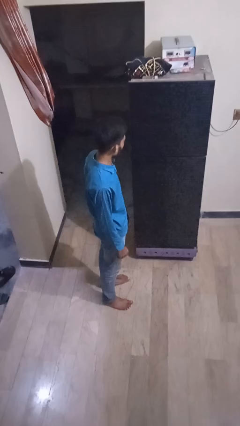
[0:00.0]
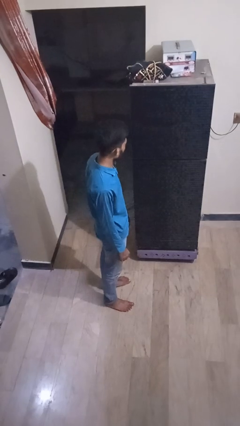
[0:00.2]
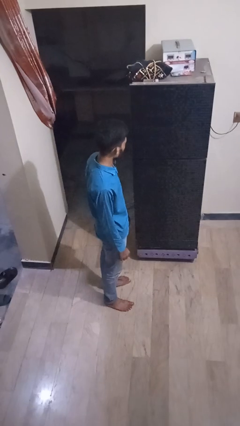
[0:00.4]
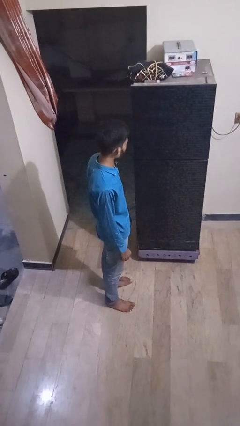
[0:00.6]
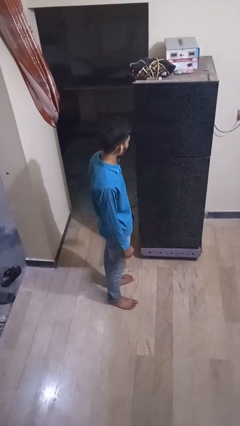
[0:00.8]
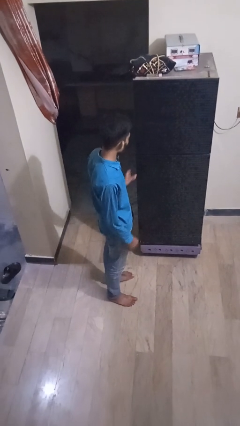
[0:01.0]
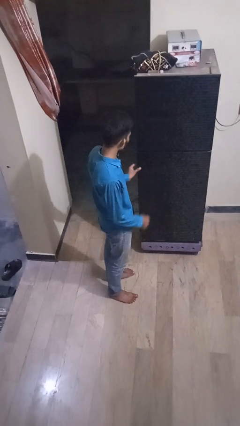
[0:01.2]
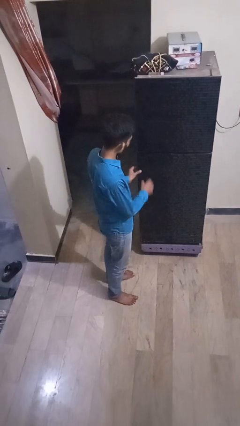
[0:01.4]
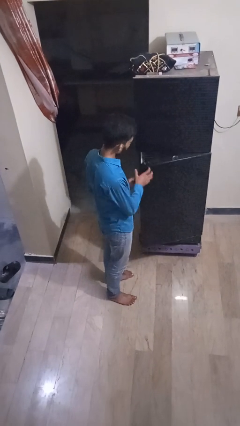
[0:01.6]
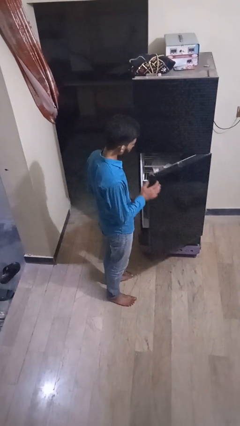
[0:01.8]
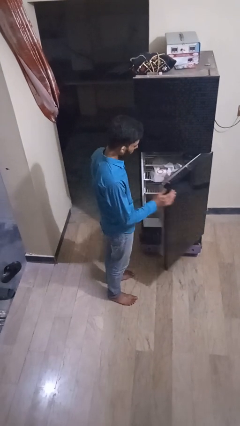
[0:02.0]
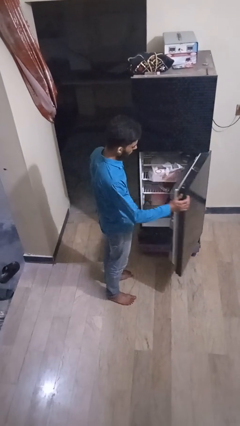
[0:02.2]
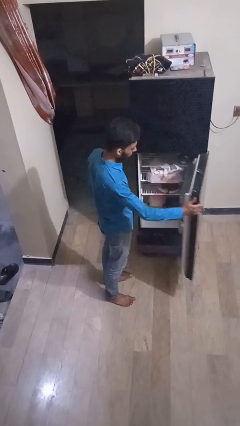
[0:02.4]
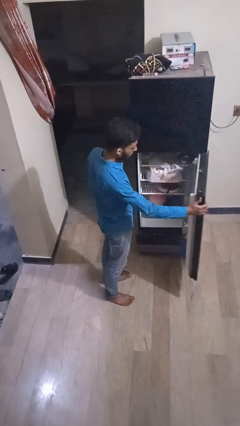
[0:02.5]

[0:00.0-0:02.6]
person opens refrigerator

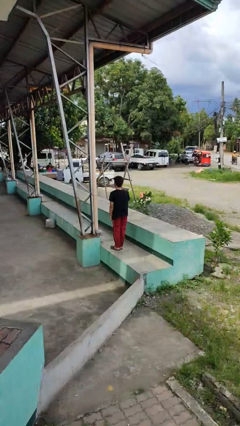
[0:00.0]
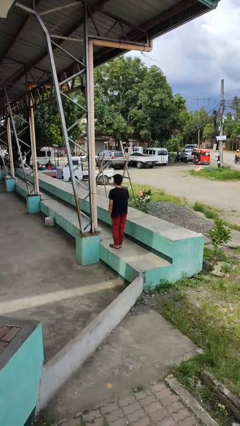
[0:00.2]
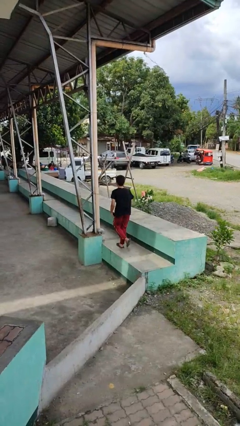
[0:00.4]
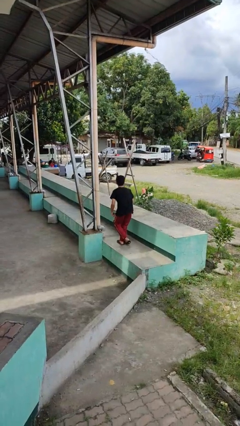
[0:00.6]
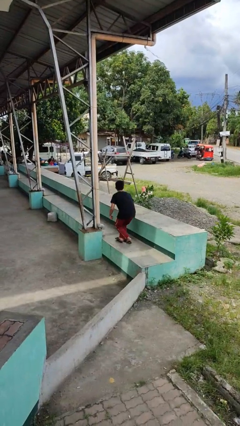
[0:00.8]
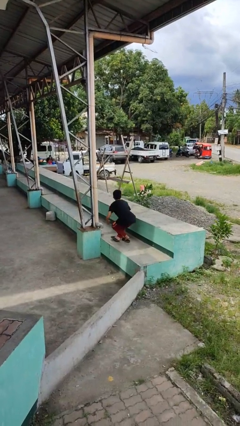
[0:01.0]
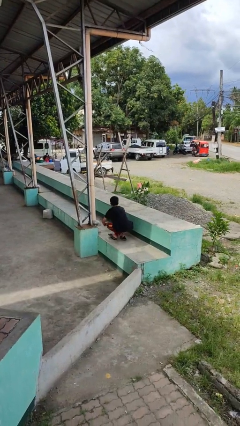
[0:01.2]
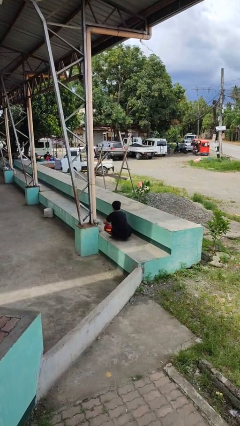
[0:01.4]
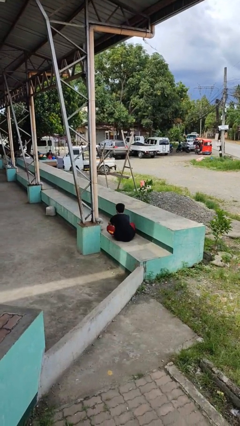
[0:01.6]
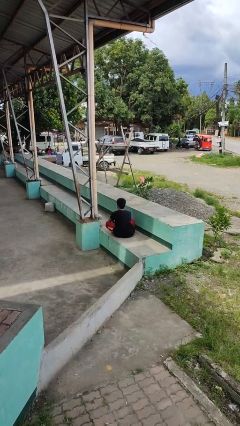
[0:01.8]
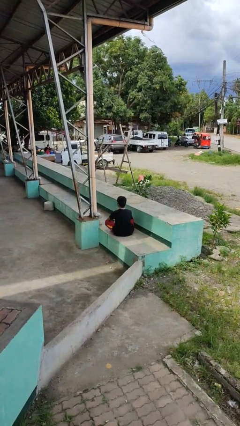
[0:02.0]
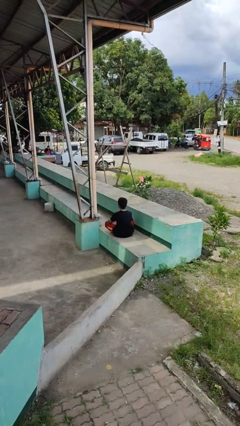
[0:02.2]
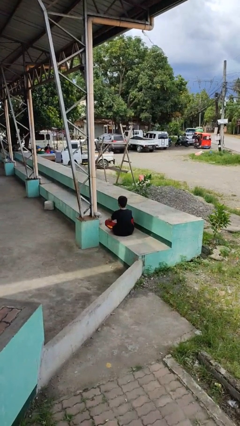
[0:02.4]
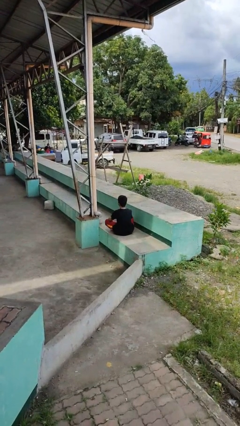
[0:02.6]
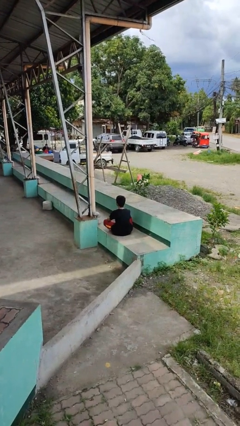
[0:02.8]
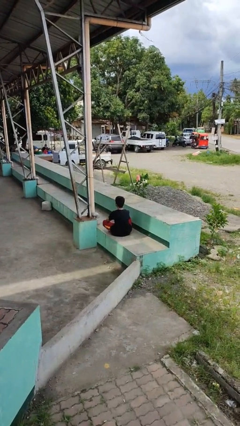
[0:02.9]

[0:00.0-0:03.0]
person sits crisscross

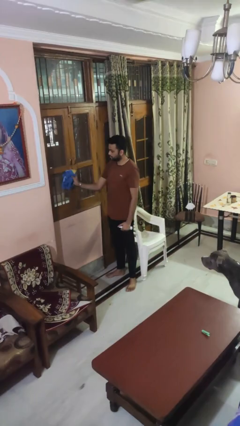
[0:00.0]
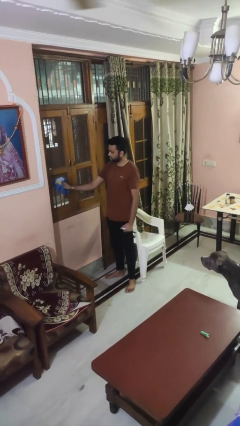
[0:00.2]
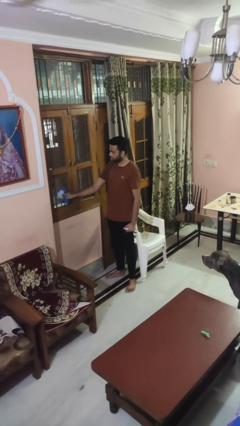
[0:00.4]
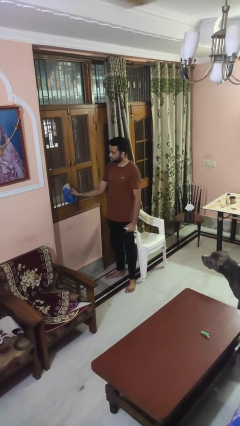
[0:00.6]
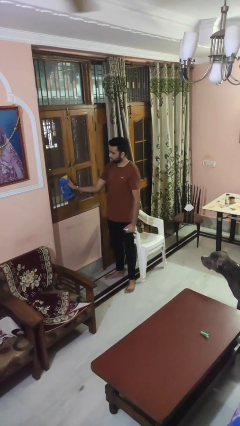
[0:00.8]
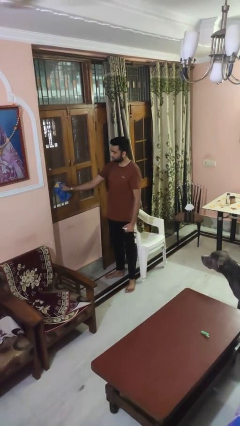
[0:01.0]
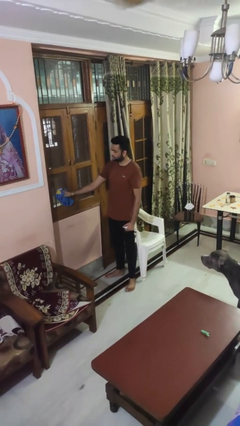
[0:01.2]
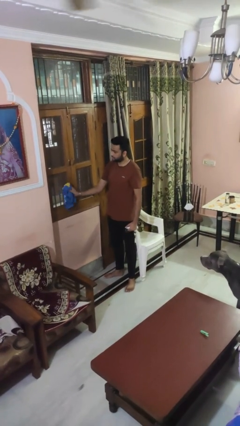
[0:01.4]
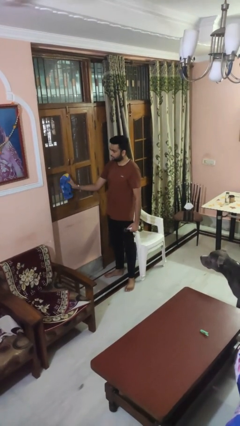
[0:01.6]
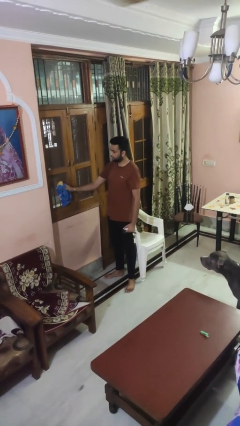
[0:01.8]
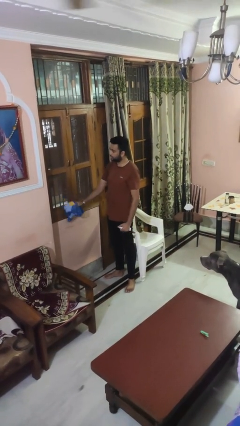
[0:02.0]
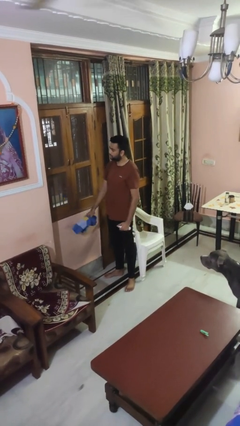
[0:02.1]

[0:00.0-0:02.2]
person washes window

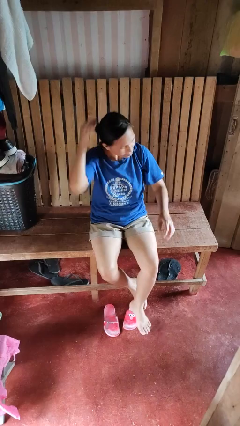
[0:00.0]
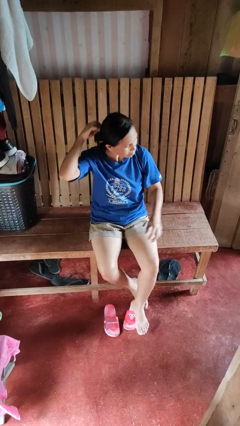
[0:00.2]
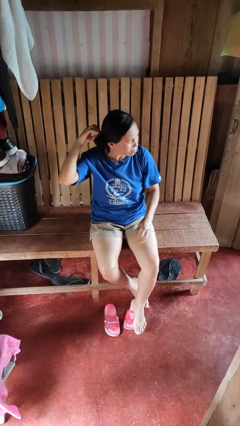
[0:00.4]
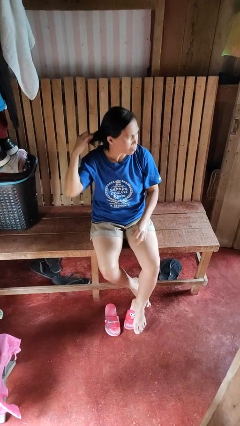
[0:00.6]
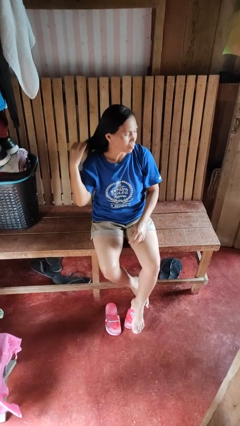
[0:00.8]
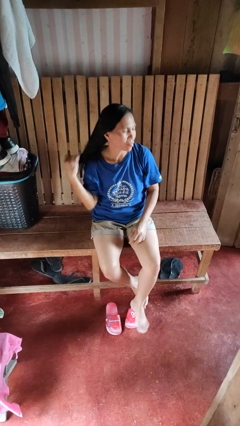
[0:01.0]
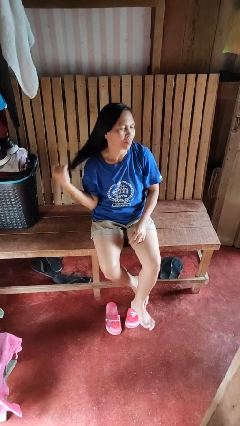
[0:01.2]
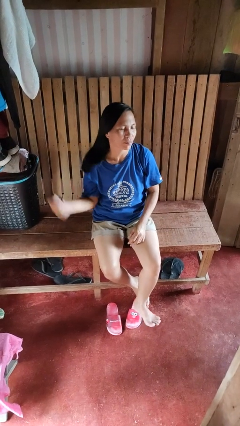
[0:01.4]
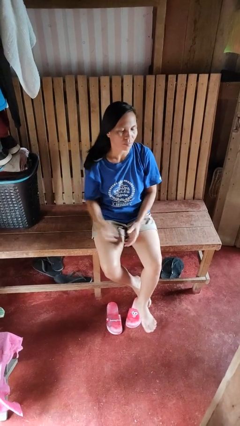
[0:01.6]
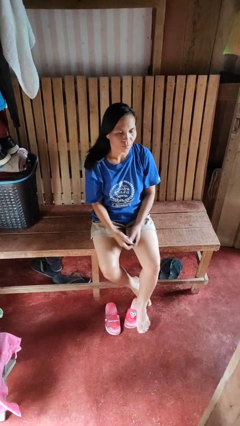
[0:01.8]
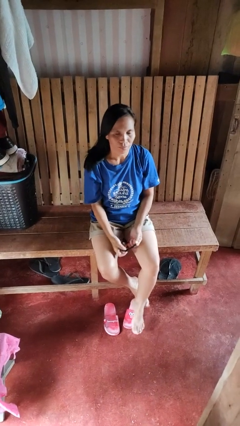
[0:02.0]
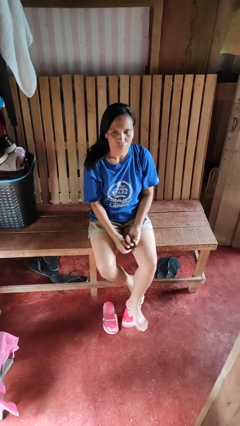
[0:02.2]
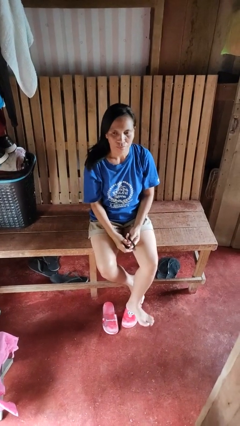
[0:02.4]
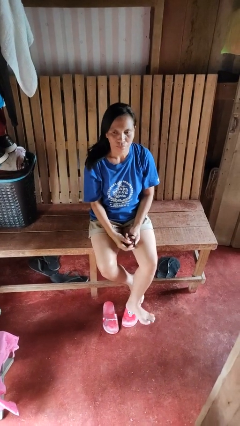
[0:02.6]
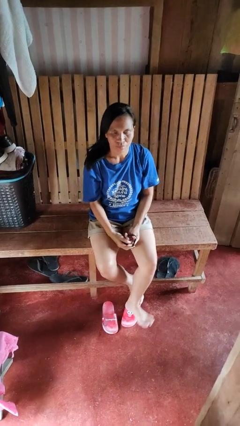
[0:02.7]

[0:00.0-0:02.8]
person takes off hairtie

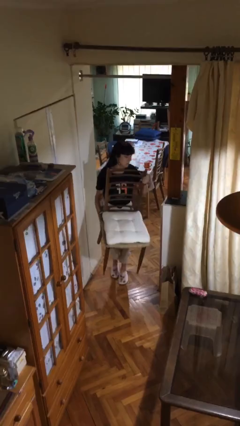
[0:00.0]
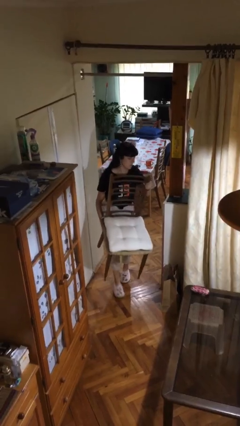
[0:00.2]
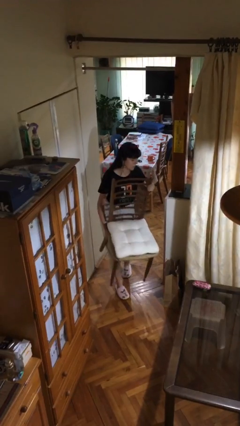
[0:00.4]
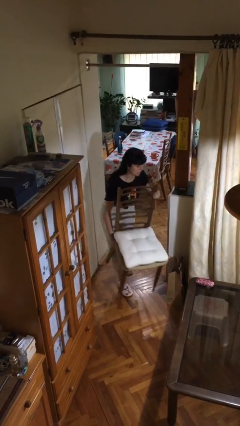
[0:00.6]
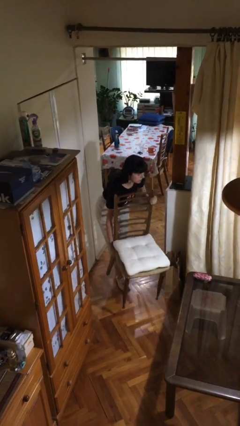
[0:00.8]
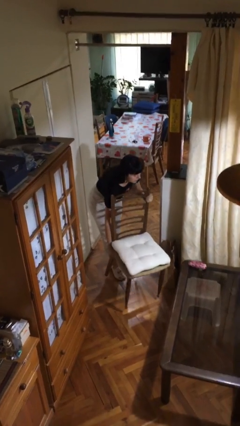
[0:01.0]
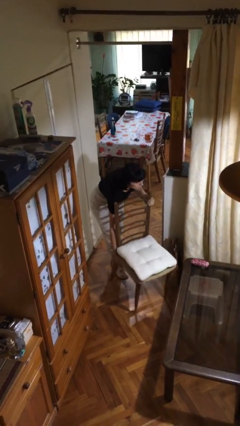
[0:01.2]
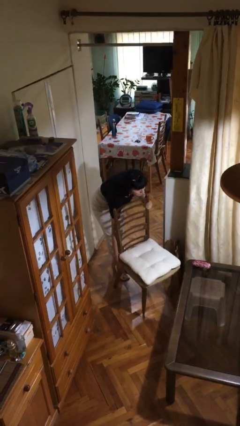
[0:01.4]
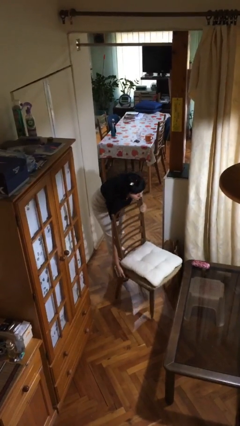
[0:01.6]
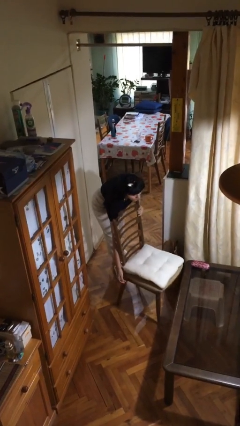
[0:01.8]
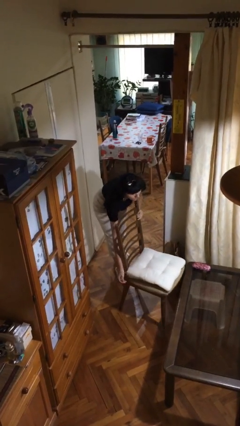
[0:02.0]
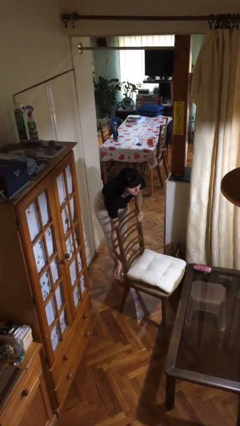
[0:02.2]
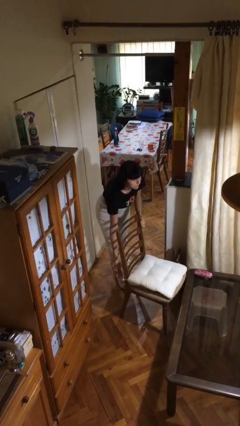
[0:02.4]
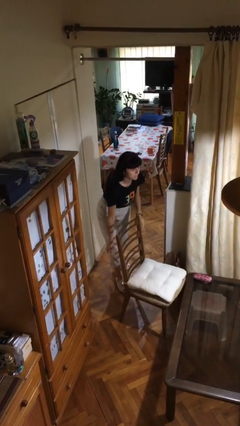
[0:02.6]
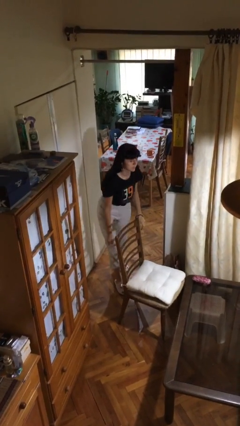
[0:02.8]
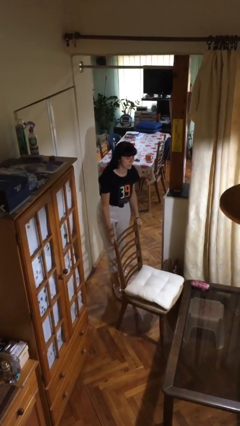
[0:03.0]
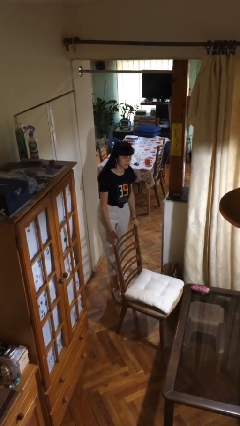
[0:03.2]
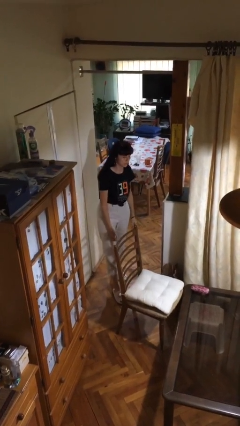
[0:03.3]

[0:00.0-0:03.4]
person puts down object on floor

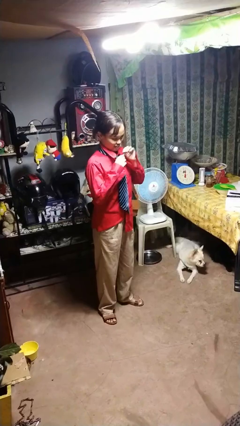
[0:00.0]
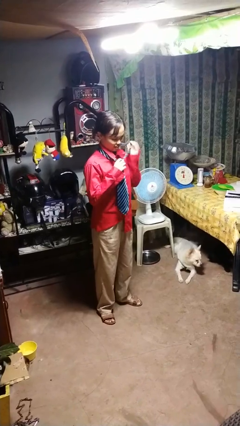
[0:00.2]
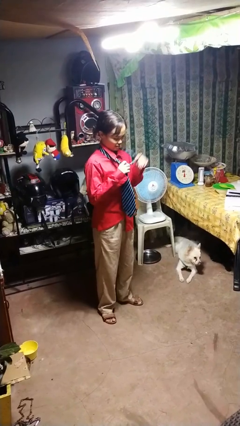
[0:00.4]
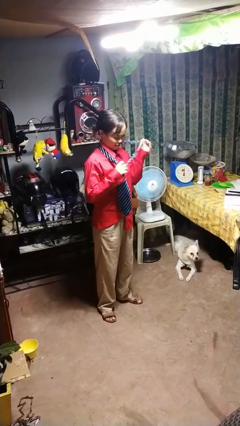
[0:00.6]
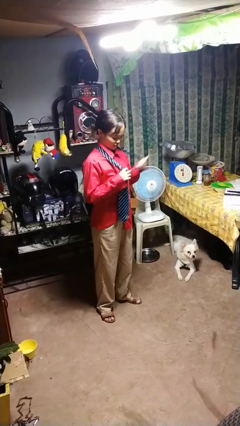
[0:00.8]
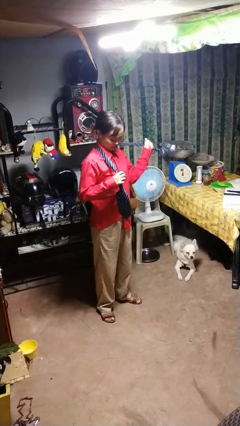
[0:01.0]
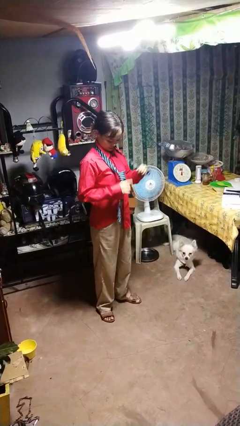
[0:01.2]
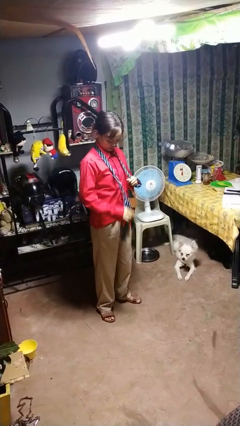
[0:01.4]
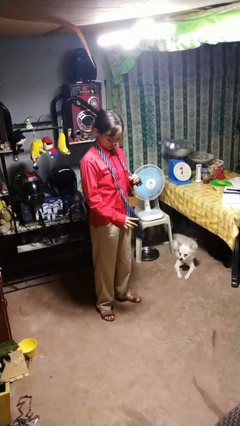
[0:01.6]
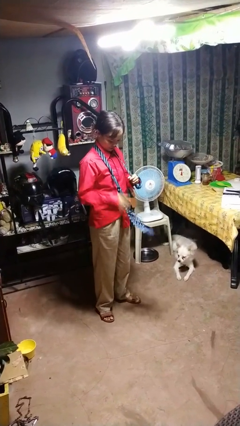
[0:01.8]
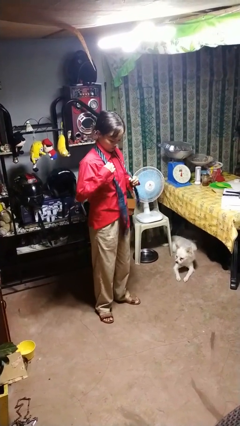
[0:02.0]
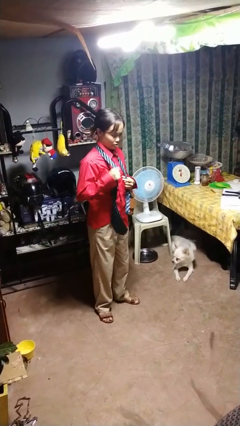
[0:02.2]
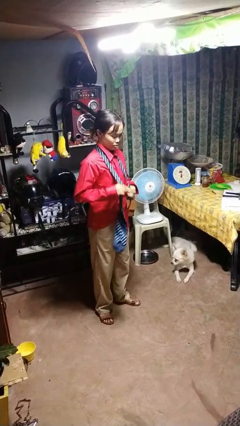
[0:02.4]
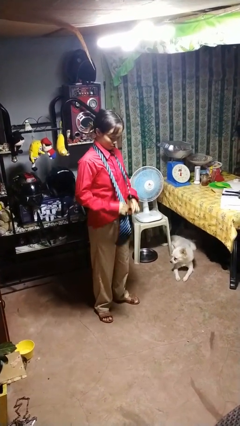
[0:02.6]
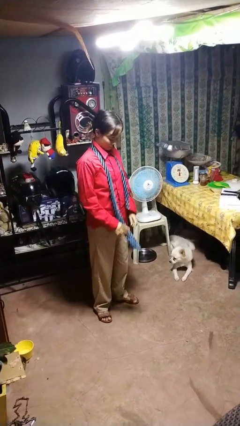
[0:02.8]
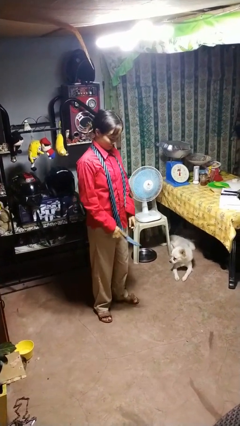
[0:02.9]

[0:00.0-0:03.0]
person takes off necktie

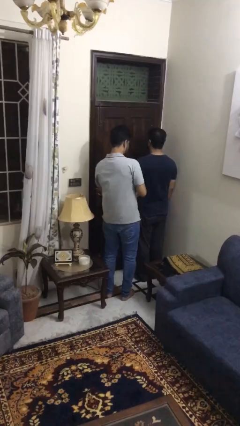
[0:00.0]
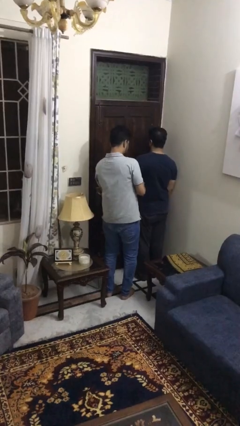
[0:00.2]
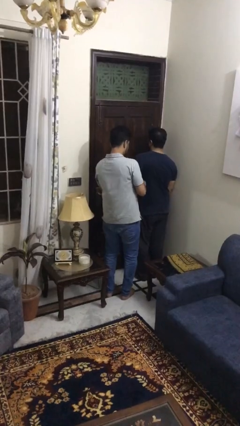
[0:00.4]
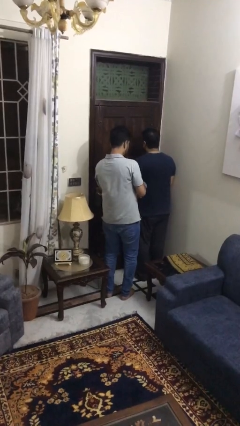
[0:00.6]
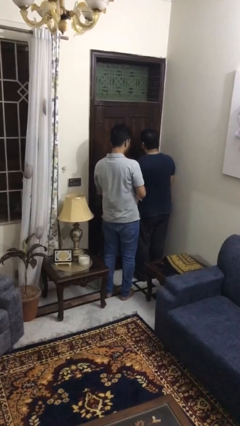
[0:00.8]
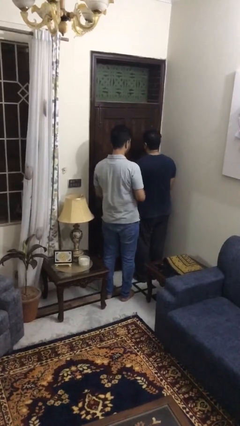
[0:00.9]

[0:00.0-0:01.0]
person tickles person
